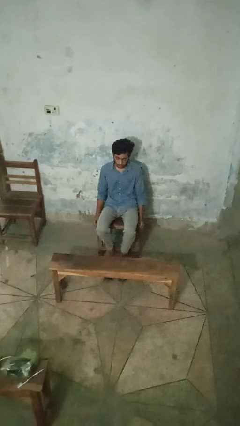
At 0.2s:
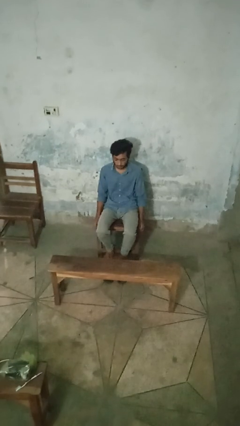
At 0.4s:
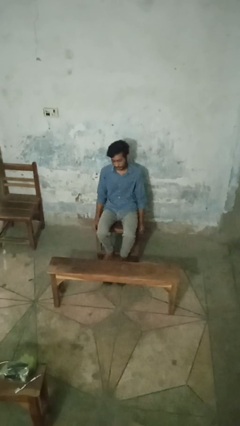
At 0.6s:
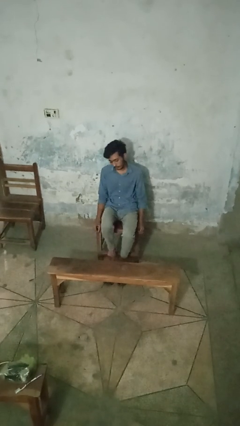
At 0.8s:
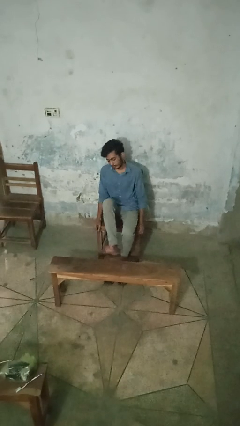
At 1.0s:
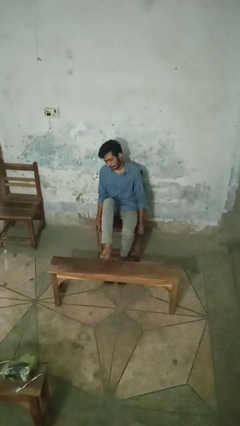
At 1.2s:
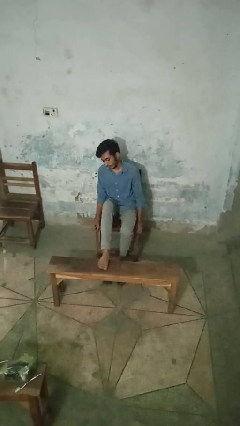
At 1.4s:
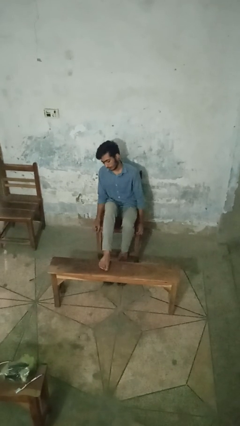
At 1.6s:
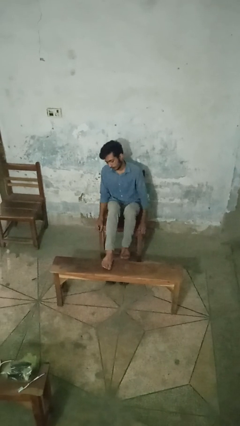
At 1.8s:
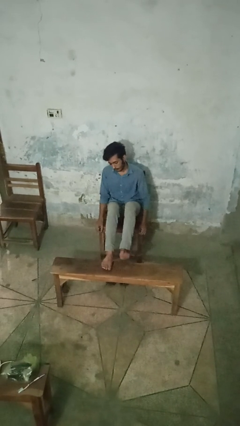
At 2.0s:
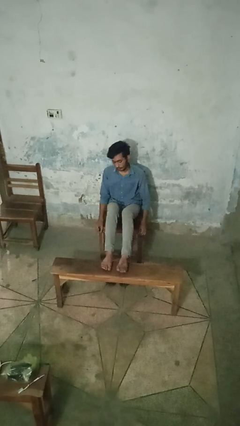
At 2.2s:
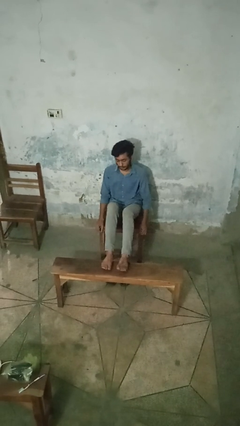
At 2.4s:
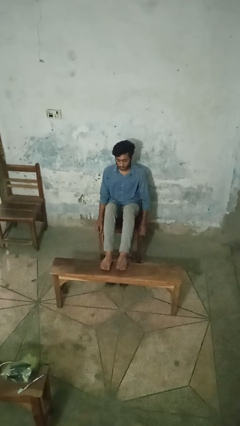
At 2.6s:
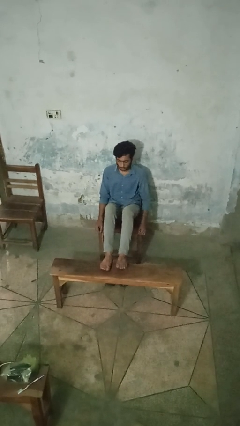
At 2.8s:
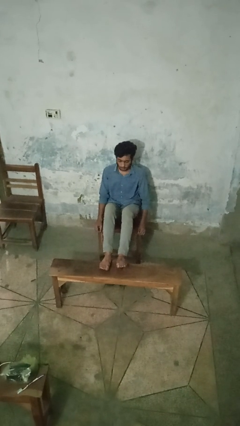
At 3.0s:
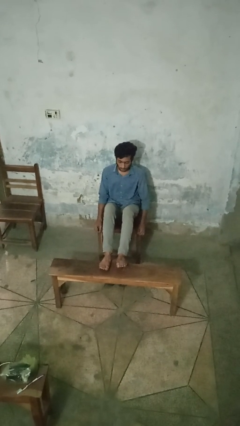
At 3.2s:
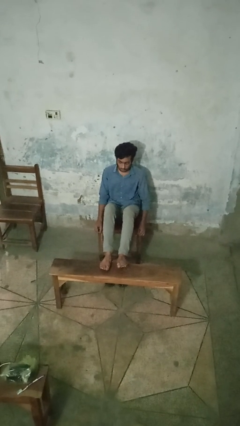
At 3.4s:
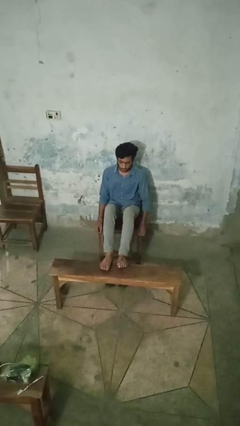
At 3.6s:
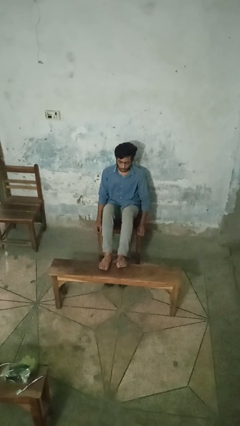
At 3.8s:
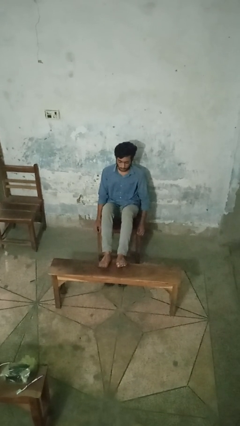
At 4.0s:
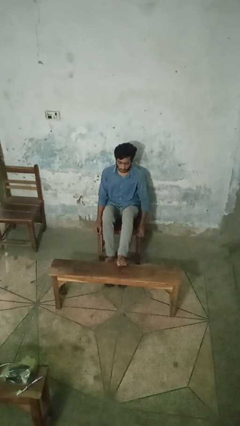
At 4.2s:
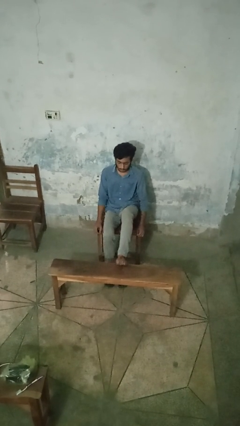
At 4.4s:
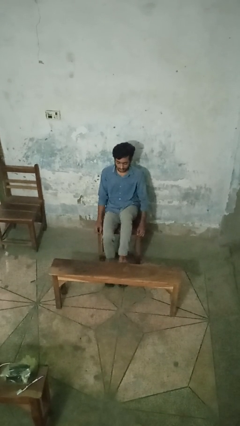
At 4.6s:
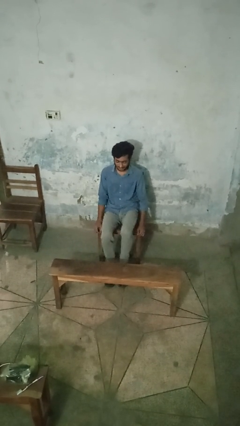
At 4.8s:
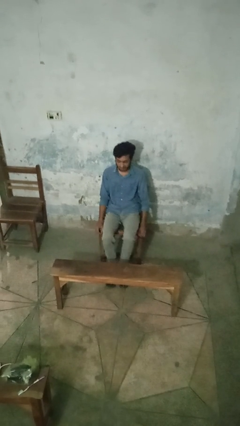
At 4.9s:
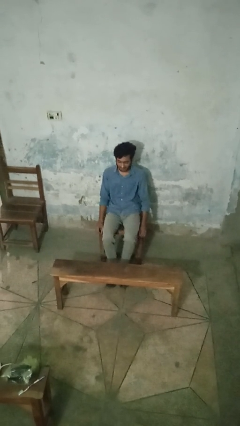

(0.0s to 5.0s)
person puts feet up

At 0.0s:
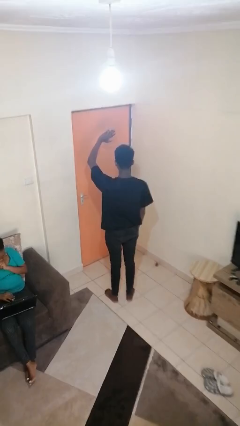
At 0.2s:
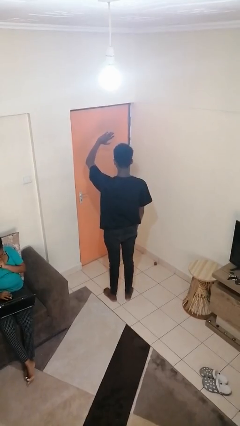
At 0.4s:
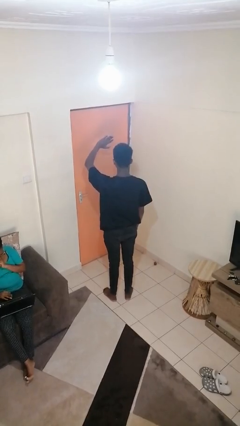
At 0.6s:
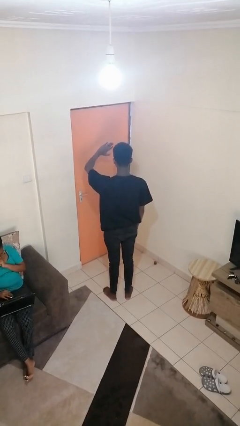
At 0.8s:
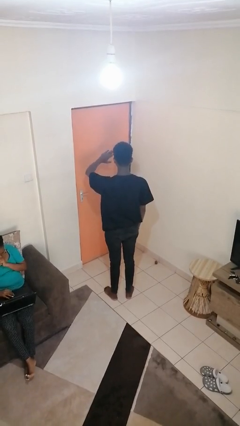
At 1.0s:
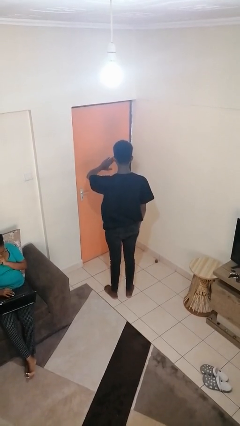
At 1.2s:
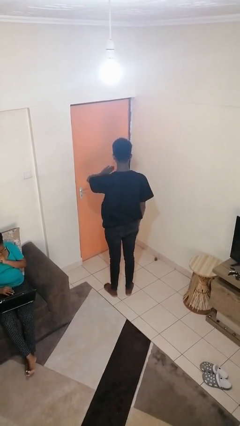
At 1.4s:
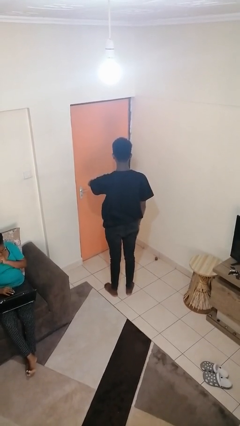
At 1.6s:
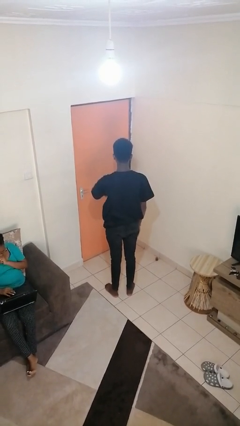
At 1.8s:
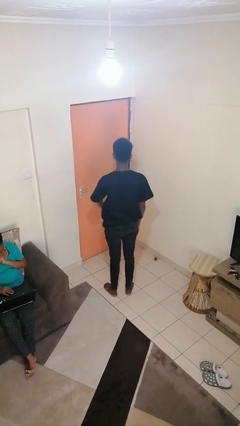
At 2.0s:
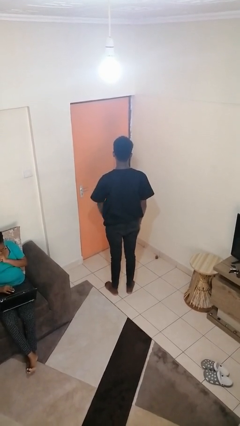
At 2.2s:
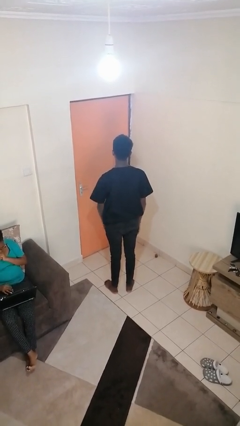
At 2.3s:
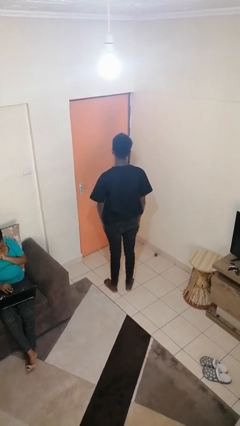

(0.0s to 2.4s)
person gestures swipe down

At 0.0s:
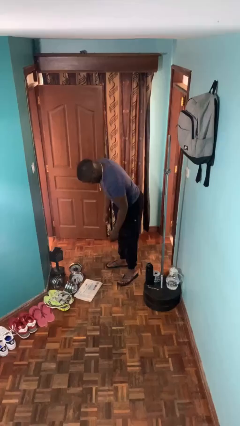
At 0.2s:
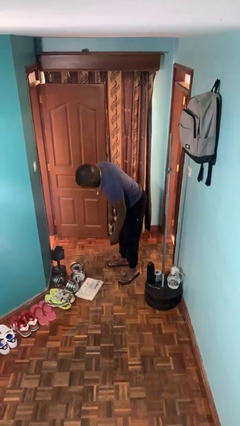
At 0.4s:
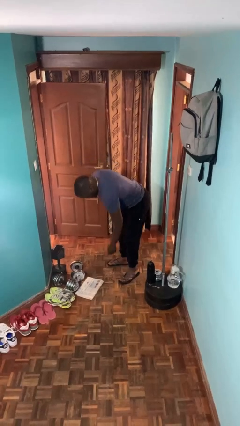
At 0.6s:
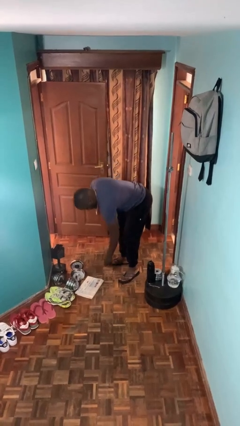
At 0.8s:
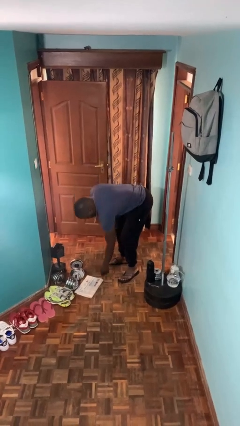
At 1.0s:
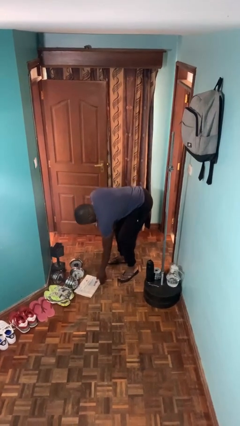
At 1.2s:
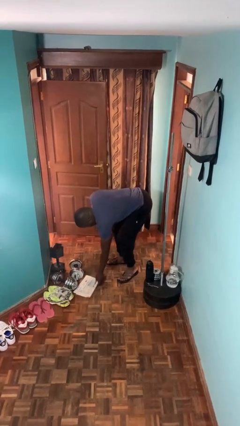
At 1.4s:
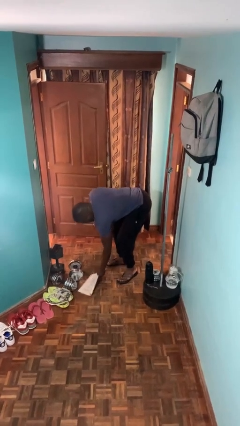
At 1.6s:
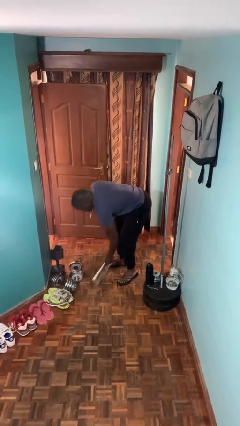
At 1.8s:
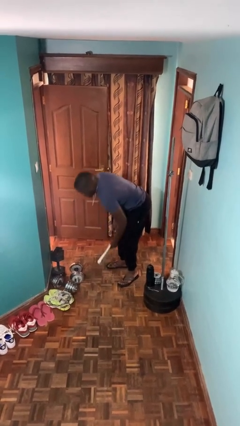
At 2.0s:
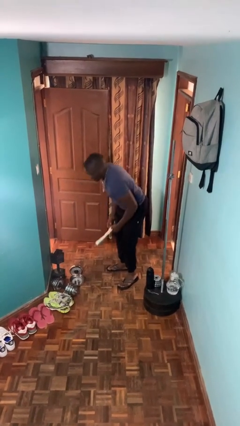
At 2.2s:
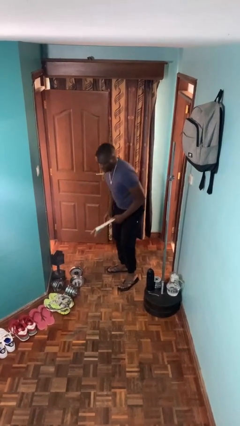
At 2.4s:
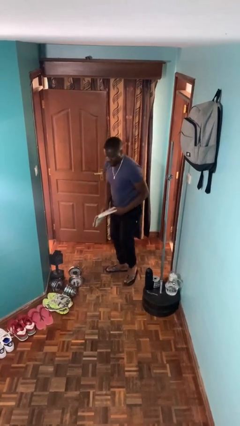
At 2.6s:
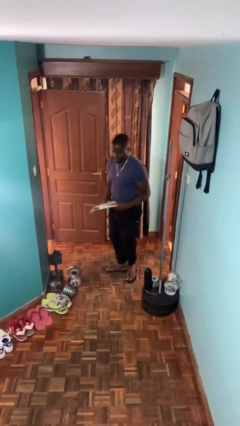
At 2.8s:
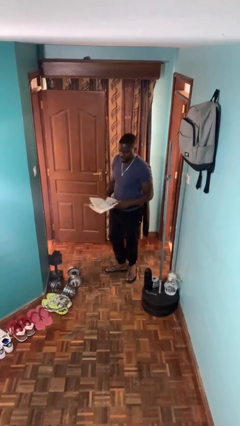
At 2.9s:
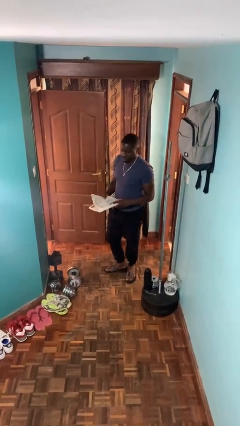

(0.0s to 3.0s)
person picks up object from floor

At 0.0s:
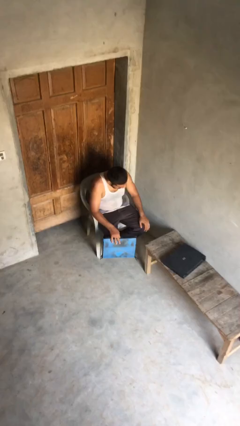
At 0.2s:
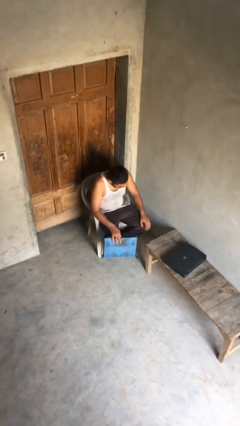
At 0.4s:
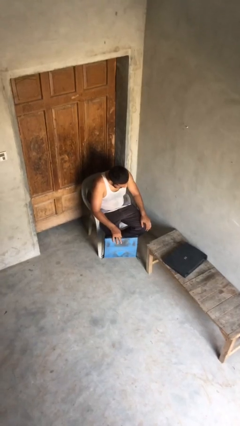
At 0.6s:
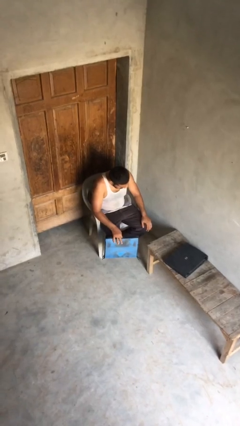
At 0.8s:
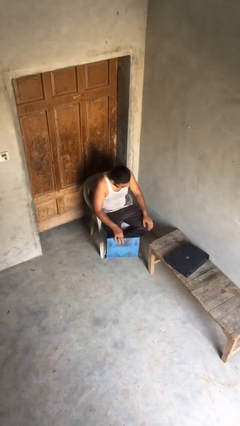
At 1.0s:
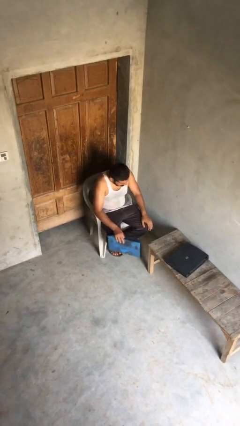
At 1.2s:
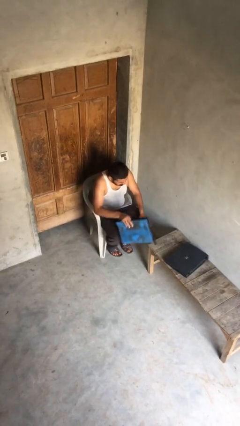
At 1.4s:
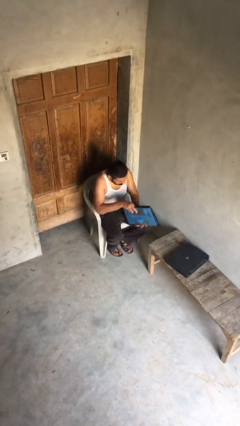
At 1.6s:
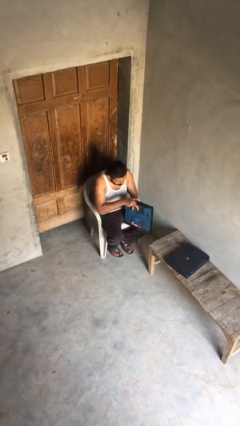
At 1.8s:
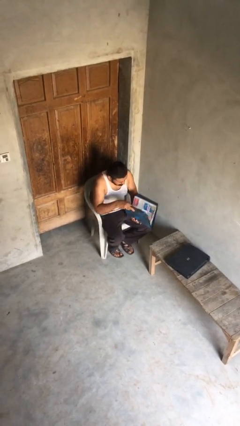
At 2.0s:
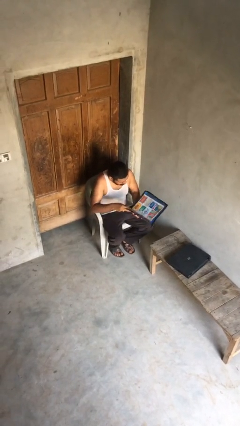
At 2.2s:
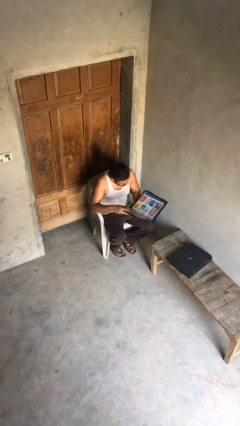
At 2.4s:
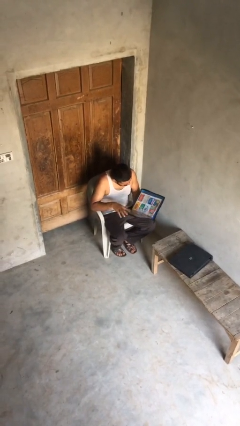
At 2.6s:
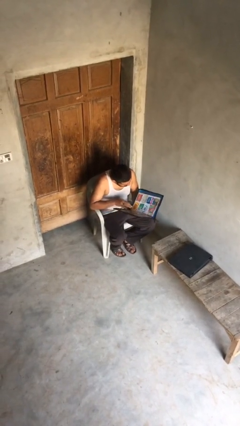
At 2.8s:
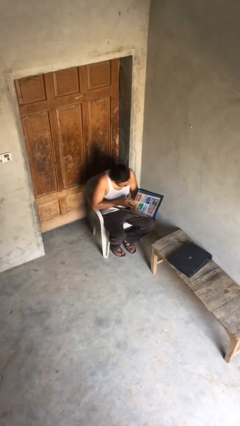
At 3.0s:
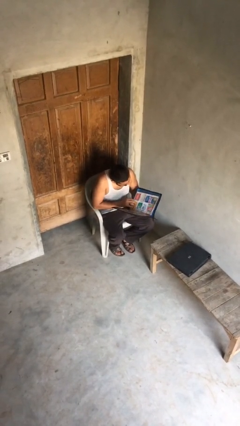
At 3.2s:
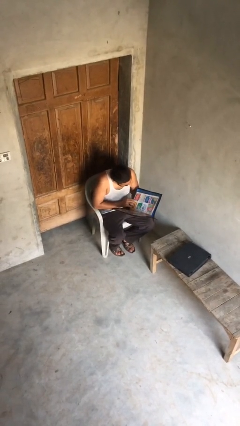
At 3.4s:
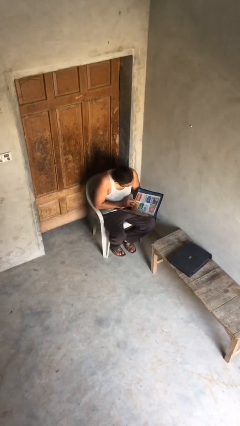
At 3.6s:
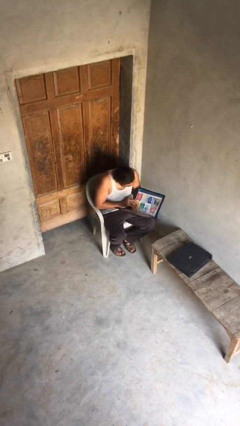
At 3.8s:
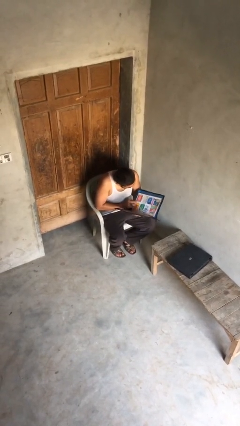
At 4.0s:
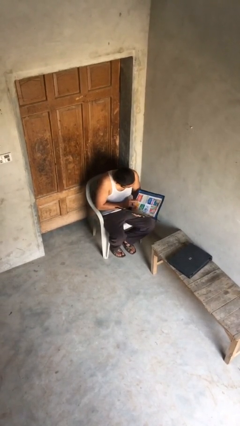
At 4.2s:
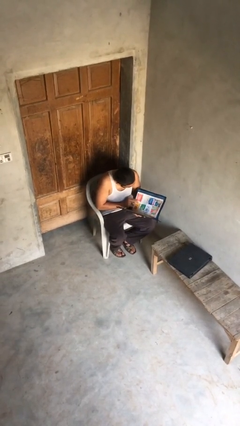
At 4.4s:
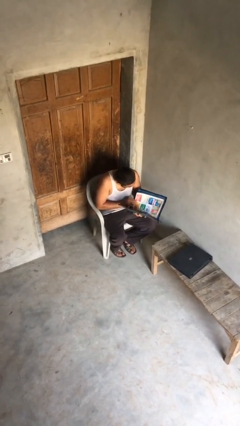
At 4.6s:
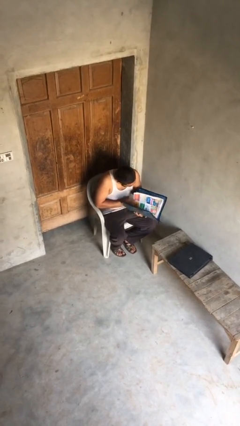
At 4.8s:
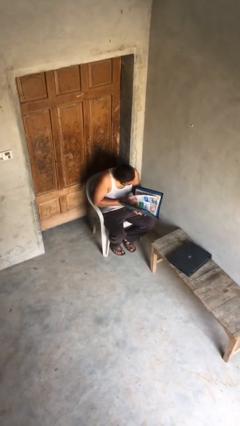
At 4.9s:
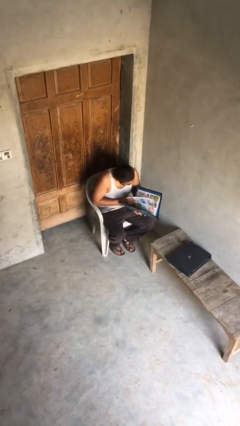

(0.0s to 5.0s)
person reads document

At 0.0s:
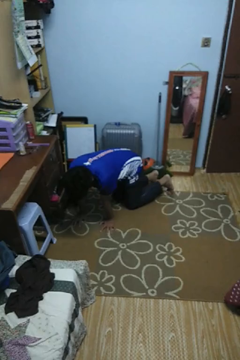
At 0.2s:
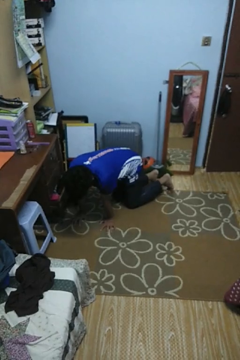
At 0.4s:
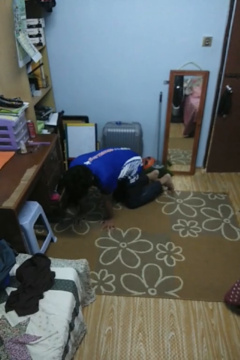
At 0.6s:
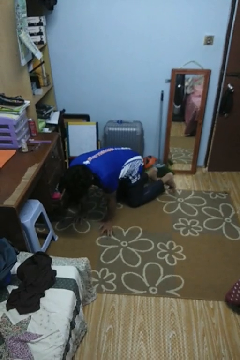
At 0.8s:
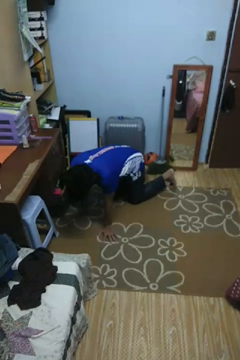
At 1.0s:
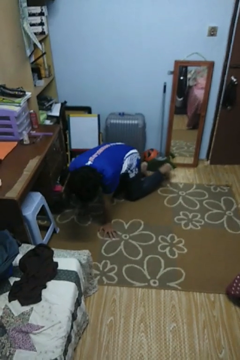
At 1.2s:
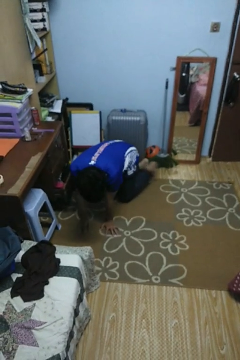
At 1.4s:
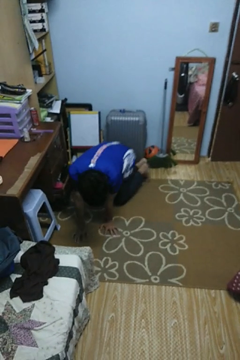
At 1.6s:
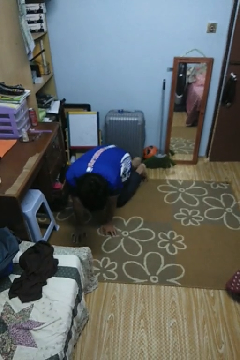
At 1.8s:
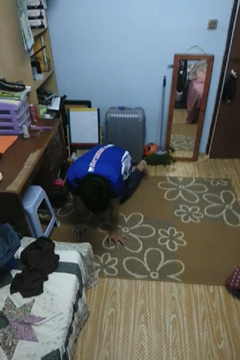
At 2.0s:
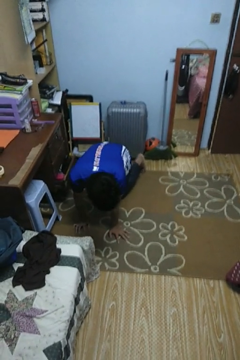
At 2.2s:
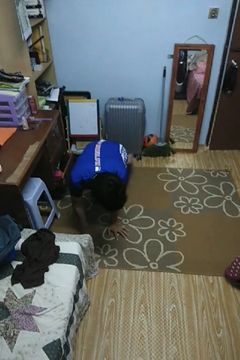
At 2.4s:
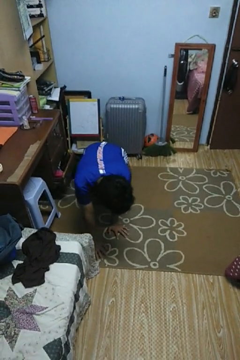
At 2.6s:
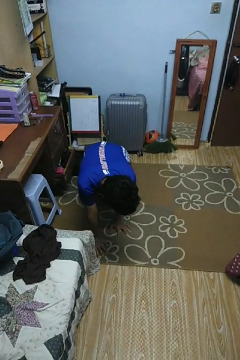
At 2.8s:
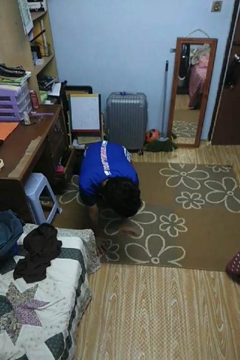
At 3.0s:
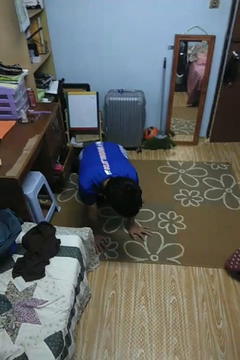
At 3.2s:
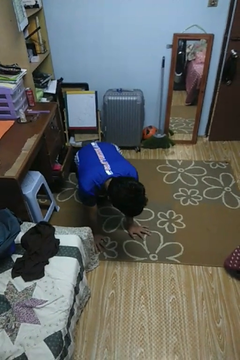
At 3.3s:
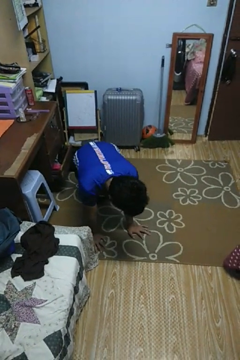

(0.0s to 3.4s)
person crawls
